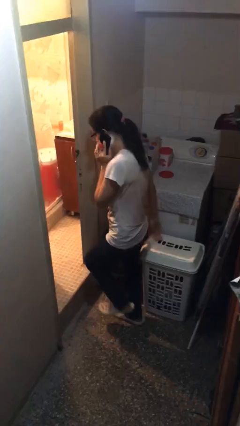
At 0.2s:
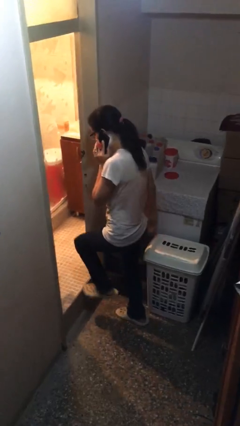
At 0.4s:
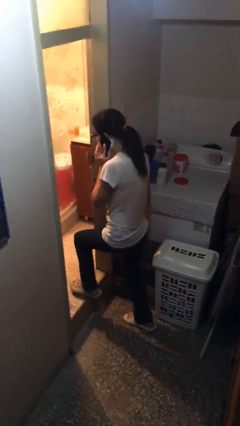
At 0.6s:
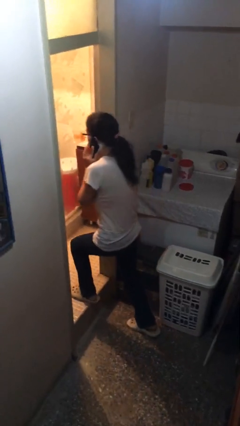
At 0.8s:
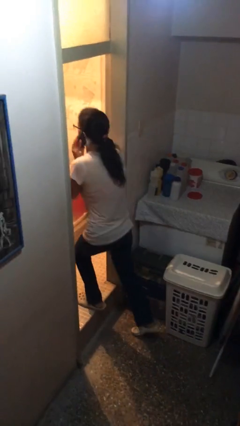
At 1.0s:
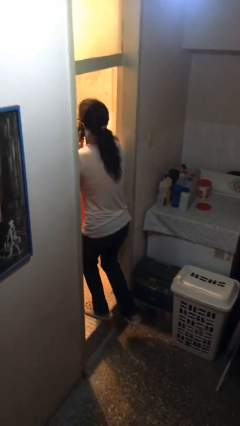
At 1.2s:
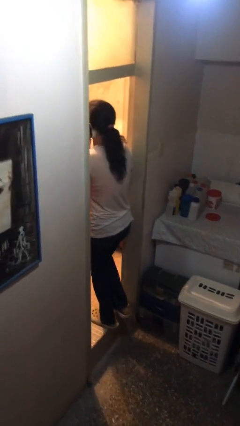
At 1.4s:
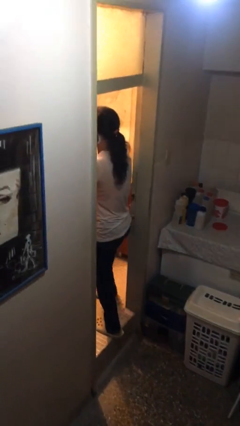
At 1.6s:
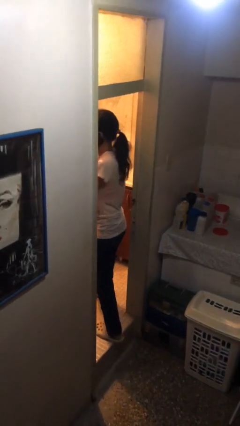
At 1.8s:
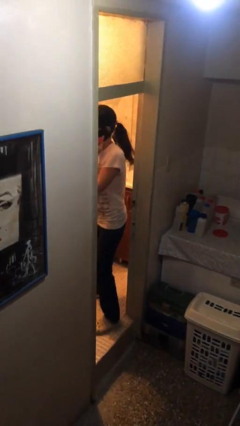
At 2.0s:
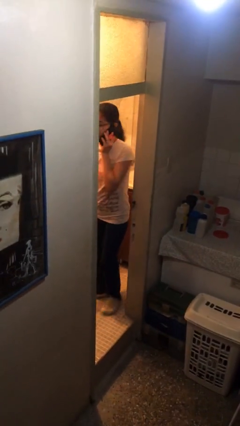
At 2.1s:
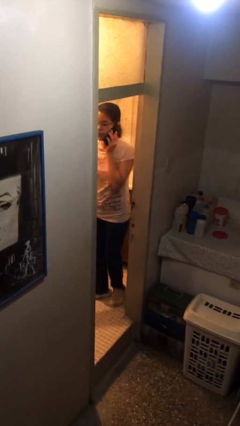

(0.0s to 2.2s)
person exits scene through structure

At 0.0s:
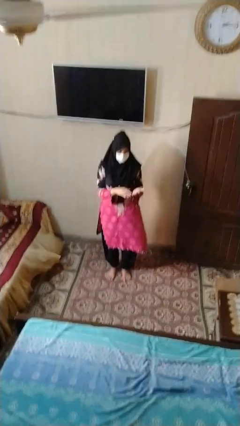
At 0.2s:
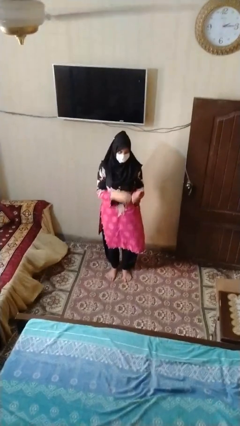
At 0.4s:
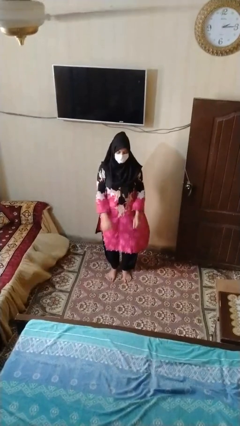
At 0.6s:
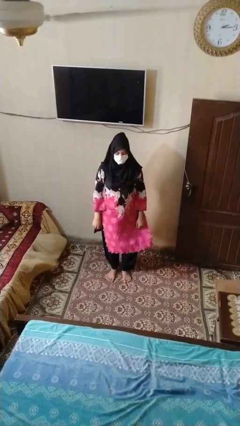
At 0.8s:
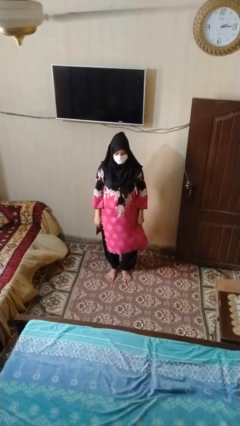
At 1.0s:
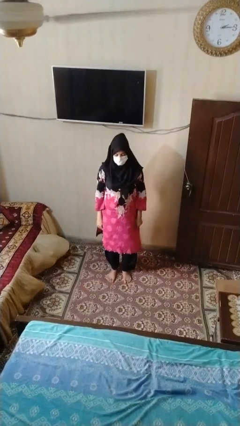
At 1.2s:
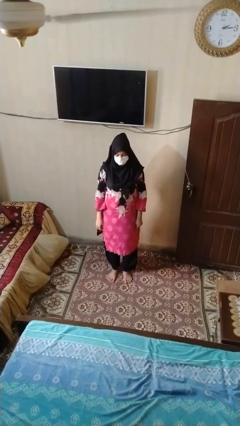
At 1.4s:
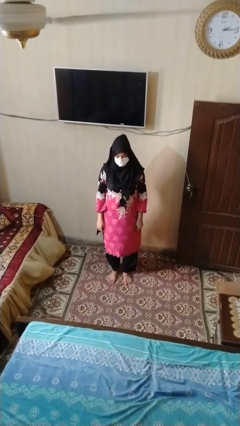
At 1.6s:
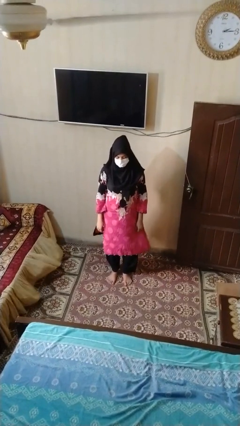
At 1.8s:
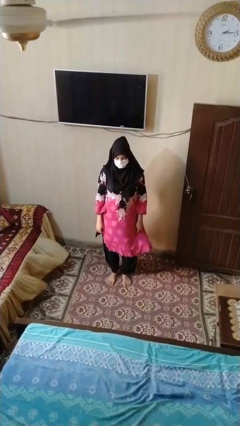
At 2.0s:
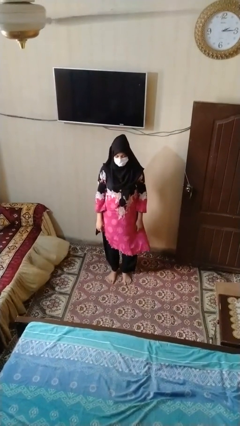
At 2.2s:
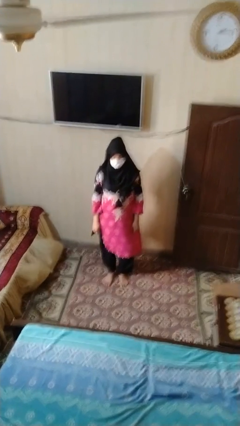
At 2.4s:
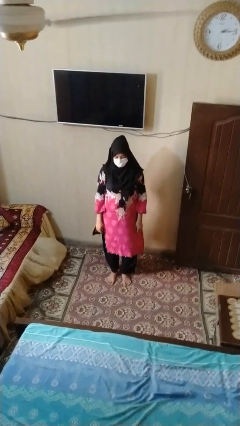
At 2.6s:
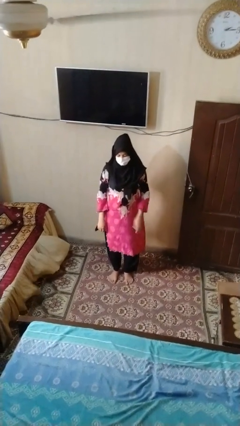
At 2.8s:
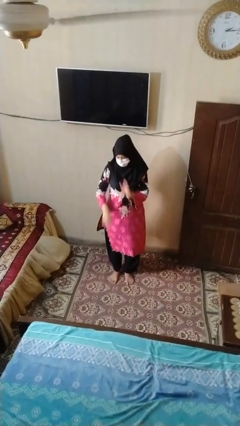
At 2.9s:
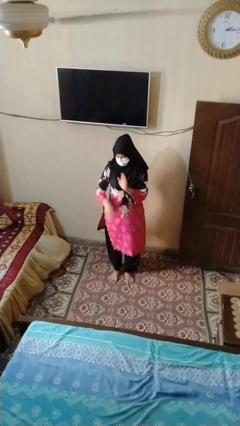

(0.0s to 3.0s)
person searches jewelry box

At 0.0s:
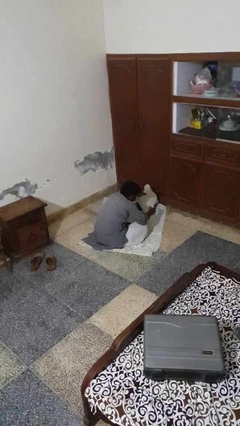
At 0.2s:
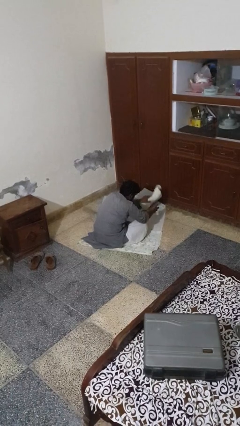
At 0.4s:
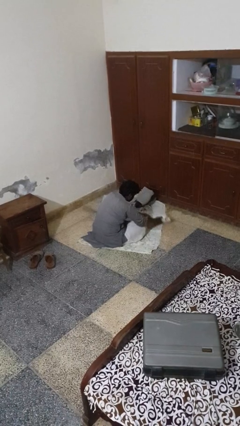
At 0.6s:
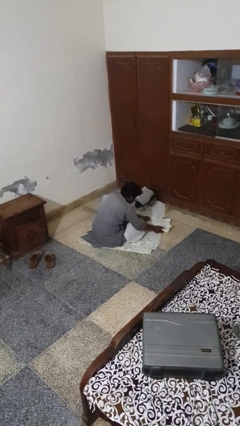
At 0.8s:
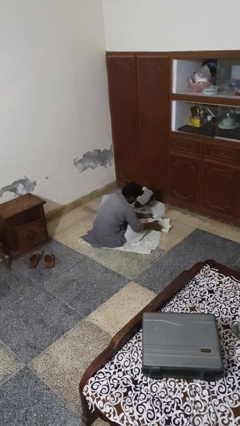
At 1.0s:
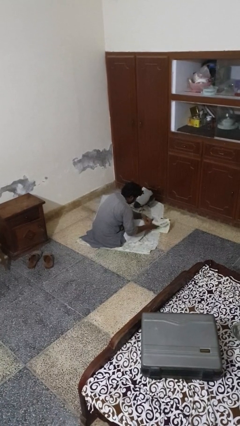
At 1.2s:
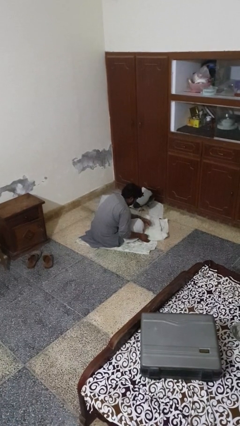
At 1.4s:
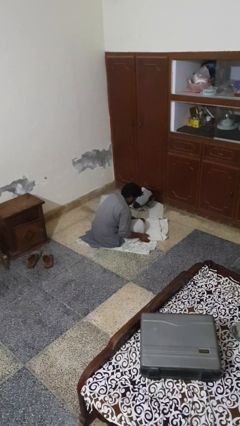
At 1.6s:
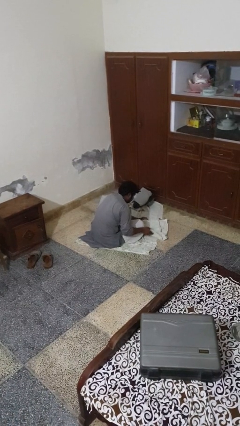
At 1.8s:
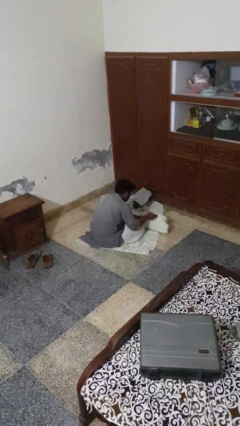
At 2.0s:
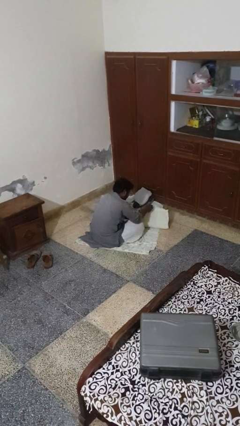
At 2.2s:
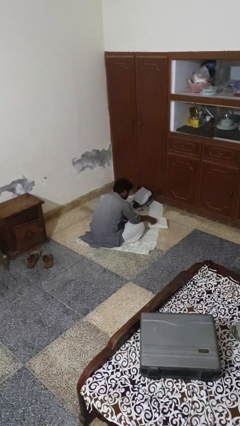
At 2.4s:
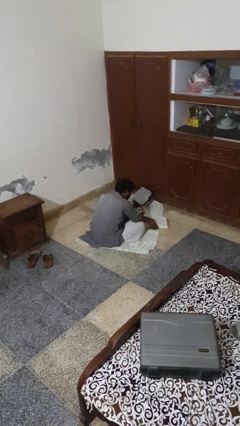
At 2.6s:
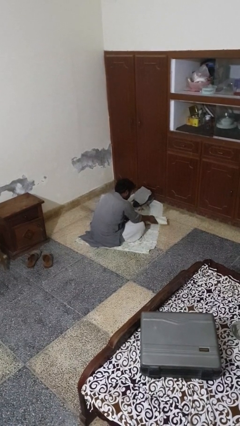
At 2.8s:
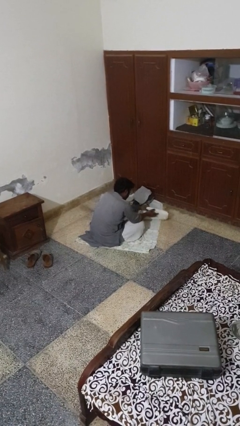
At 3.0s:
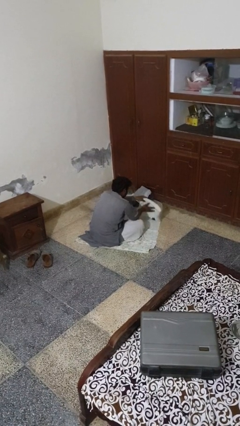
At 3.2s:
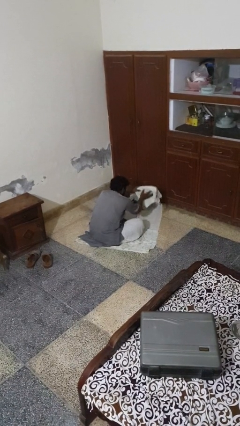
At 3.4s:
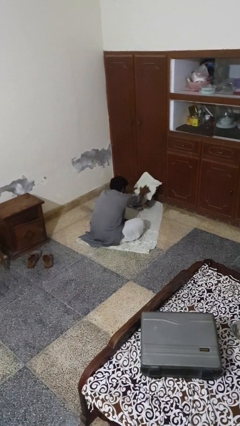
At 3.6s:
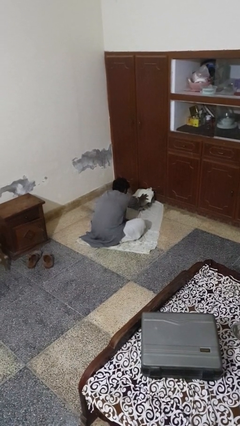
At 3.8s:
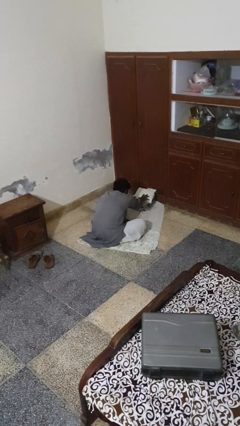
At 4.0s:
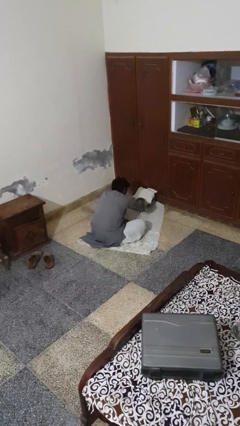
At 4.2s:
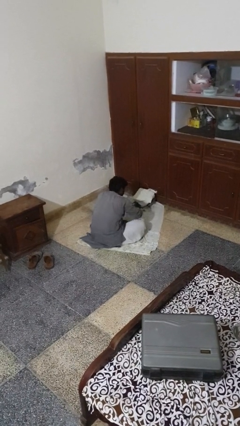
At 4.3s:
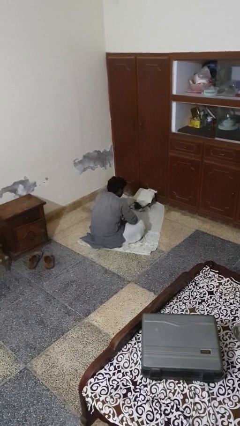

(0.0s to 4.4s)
person folds towel

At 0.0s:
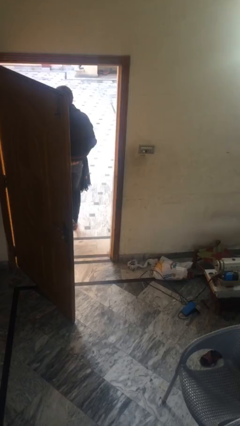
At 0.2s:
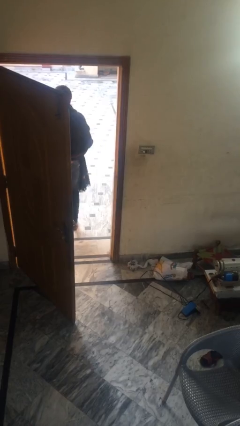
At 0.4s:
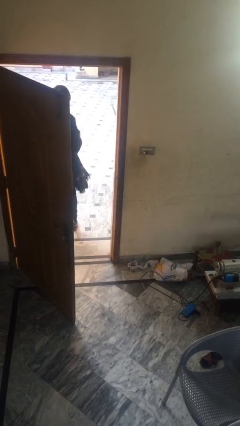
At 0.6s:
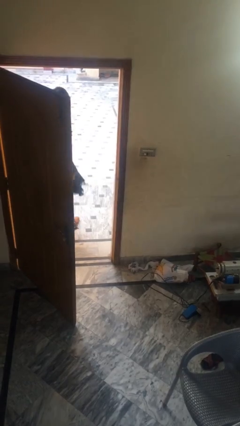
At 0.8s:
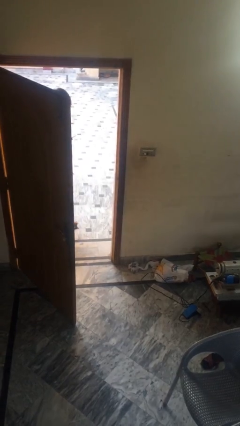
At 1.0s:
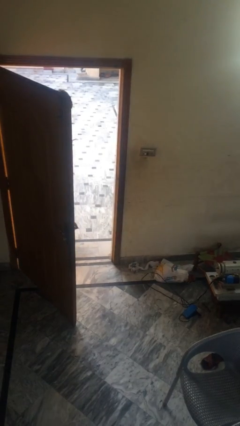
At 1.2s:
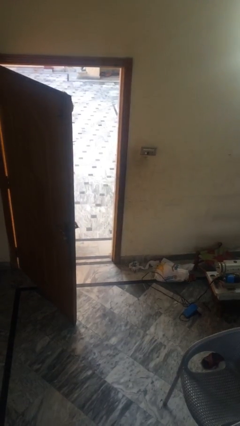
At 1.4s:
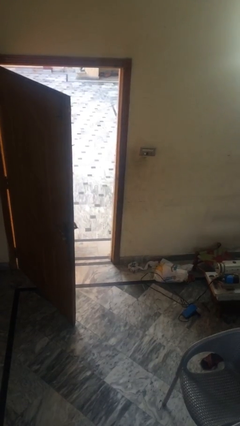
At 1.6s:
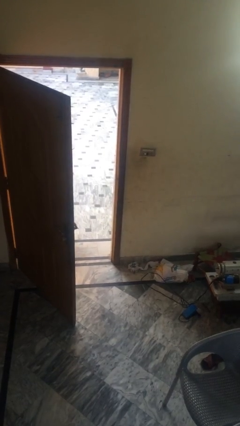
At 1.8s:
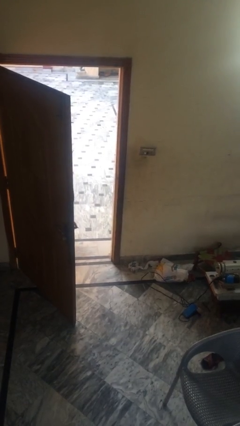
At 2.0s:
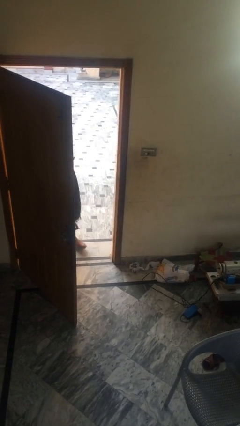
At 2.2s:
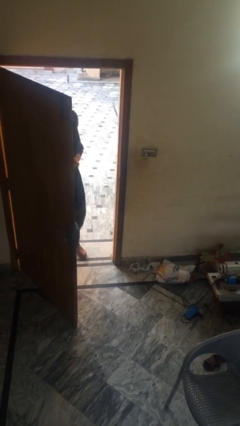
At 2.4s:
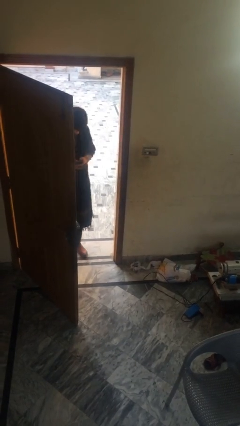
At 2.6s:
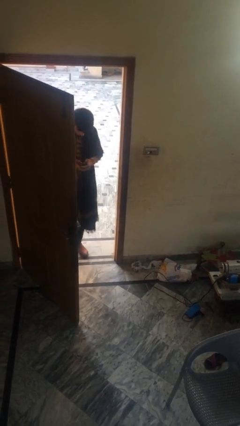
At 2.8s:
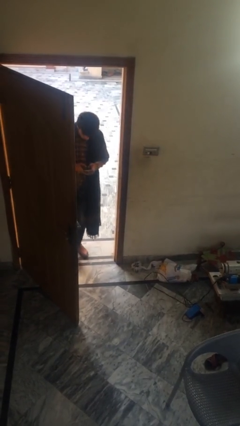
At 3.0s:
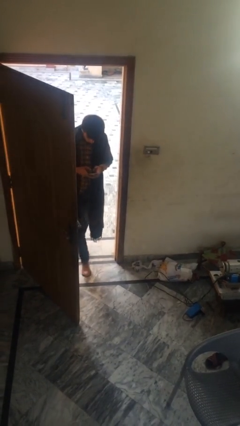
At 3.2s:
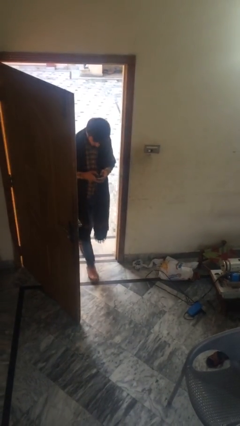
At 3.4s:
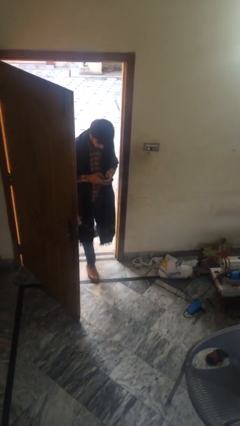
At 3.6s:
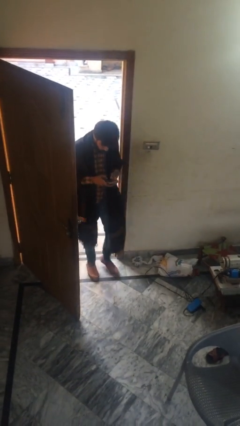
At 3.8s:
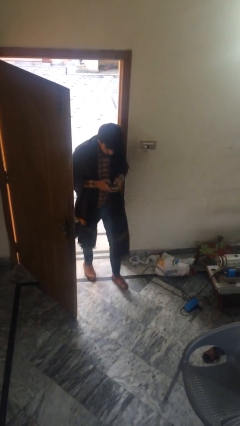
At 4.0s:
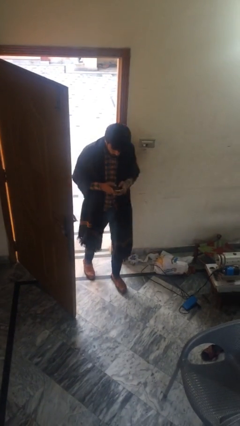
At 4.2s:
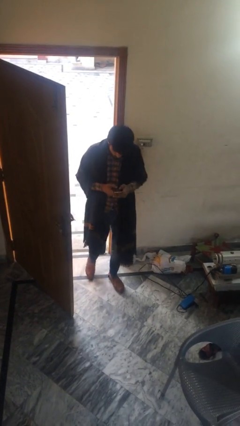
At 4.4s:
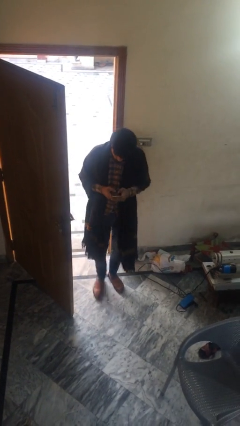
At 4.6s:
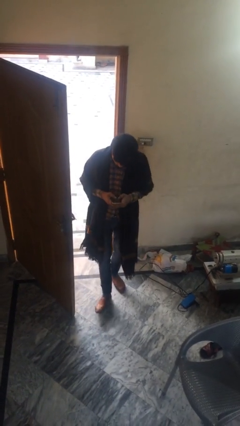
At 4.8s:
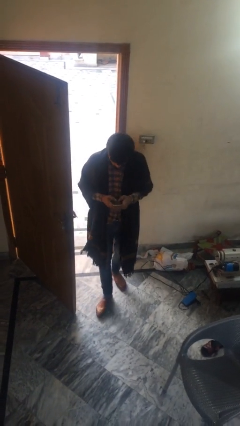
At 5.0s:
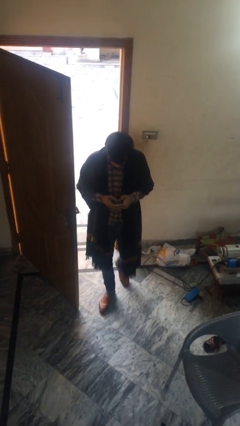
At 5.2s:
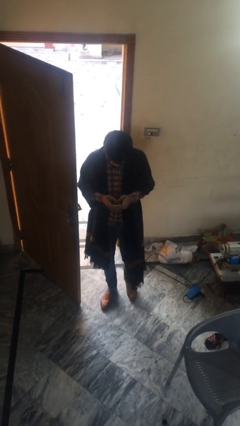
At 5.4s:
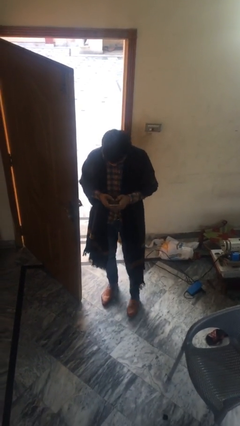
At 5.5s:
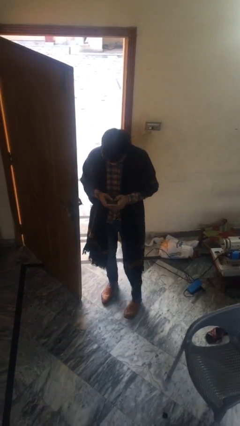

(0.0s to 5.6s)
person enters scene through structure

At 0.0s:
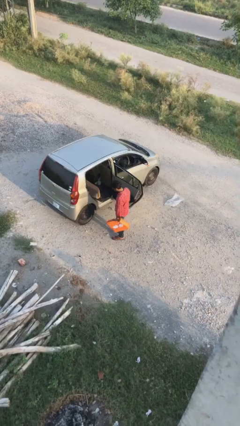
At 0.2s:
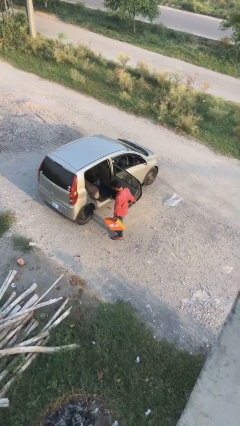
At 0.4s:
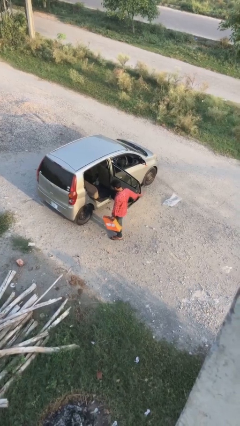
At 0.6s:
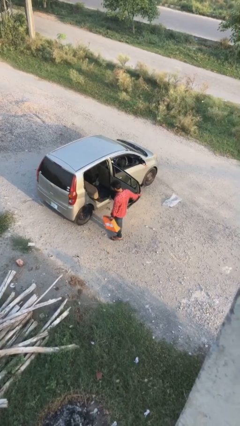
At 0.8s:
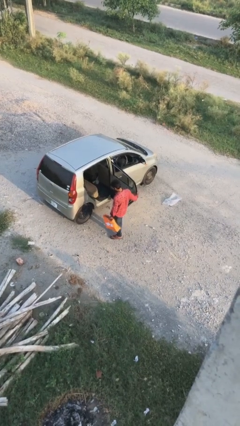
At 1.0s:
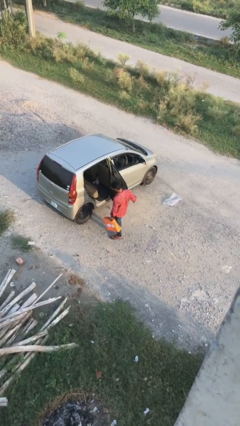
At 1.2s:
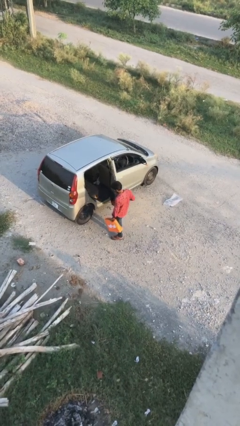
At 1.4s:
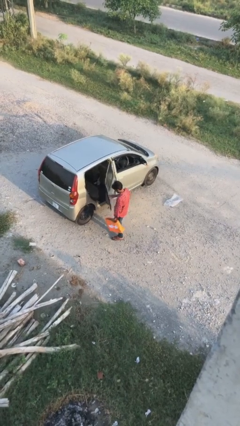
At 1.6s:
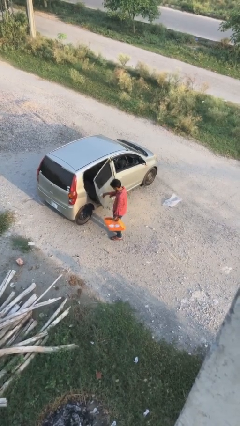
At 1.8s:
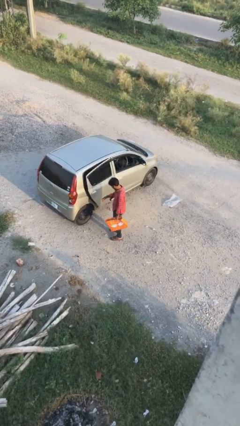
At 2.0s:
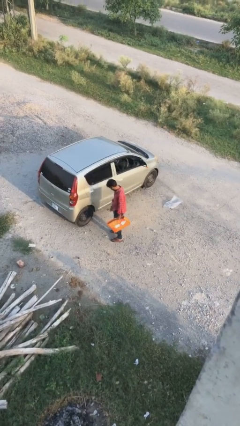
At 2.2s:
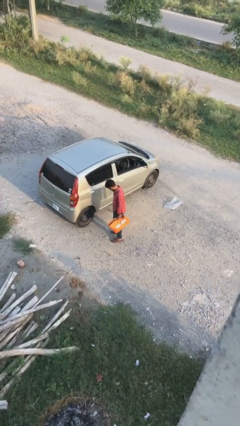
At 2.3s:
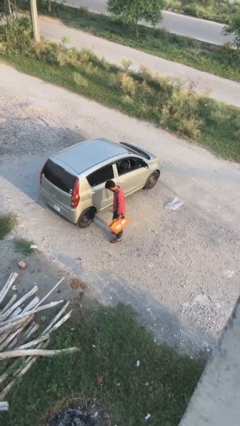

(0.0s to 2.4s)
person closes car door

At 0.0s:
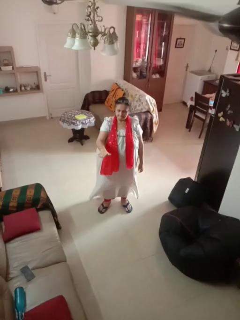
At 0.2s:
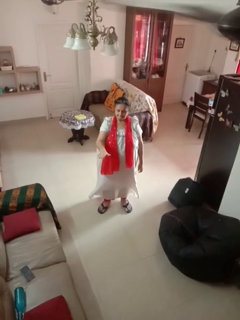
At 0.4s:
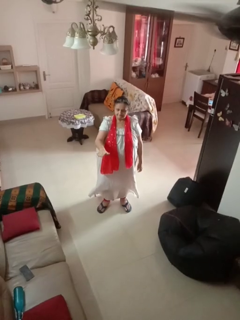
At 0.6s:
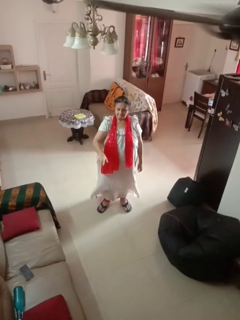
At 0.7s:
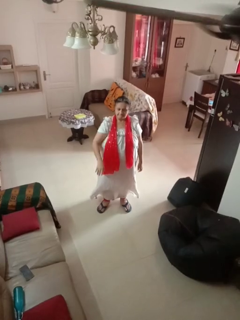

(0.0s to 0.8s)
person gestures swipe down
